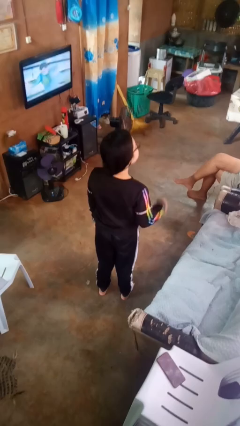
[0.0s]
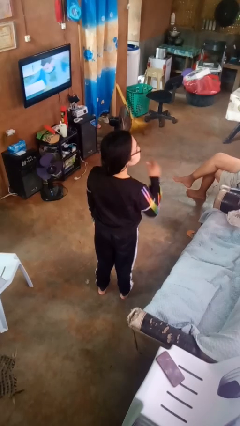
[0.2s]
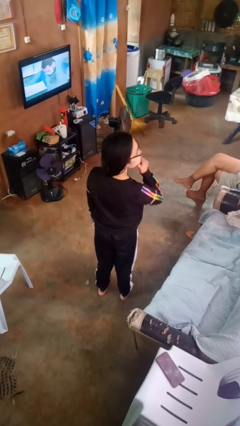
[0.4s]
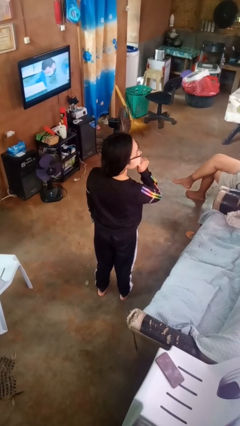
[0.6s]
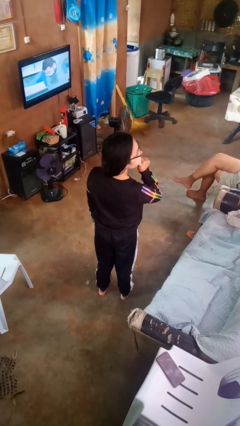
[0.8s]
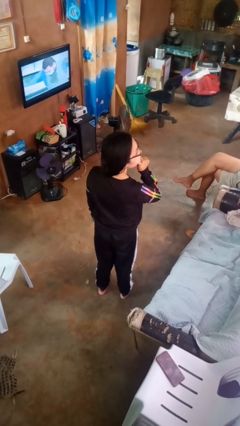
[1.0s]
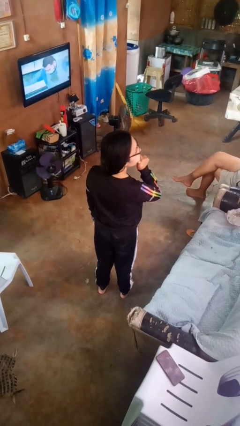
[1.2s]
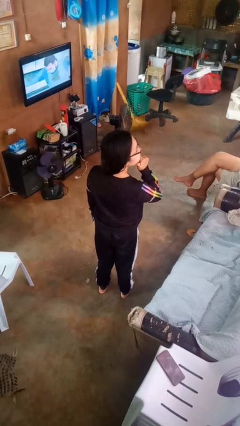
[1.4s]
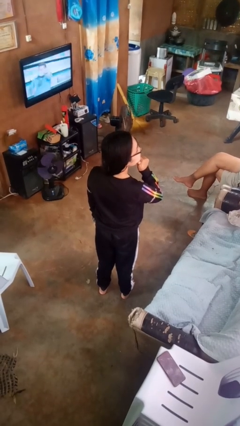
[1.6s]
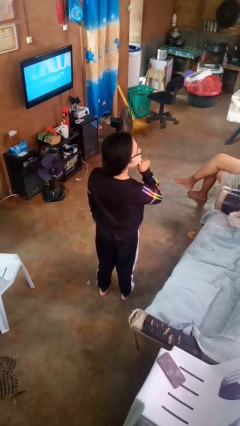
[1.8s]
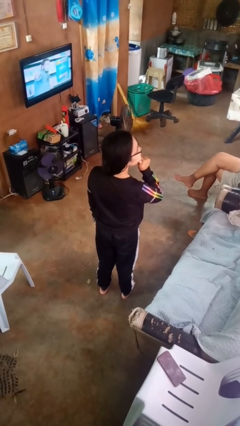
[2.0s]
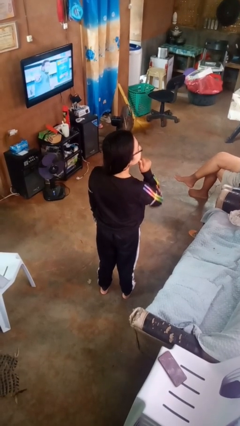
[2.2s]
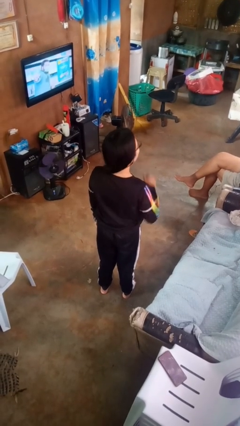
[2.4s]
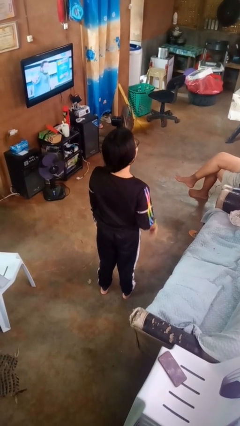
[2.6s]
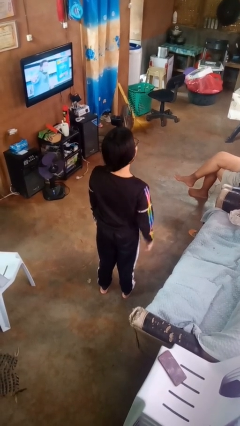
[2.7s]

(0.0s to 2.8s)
person strokes chin

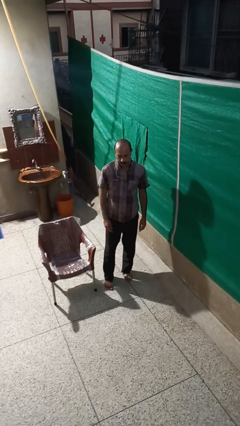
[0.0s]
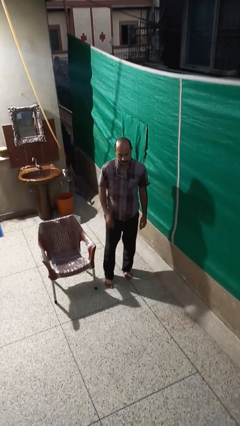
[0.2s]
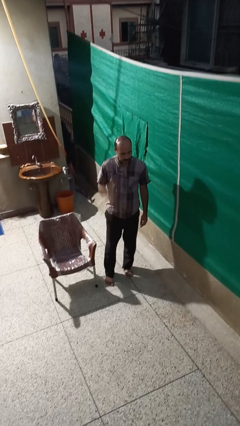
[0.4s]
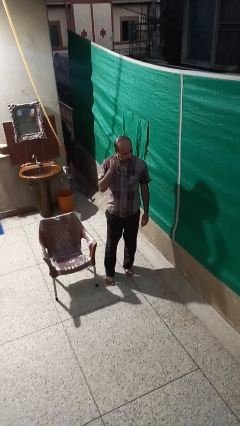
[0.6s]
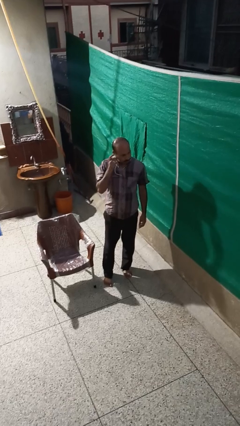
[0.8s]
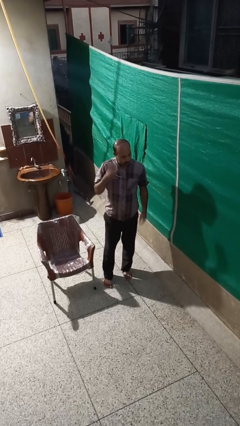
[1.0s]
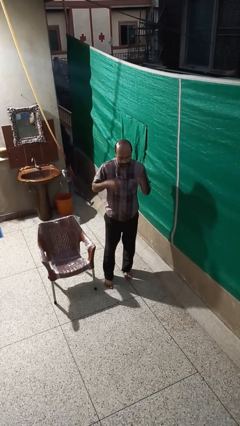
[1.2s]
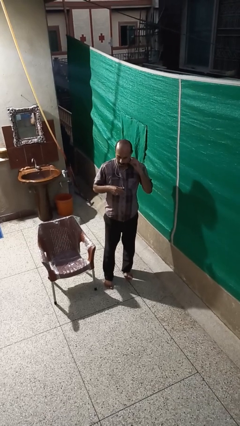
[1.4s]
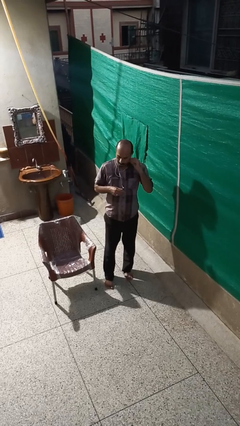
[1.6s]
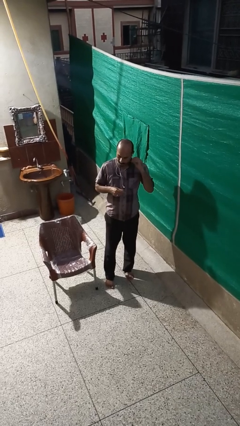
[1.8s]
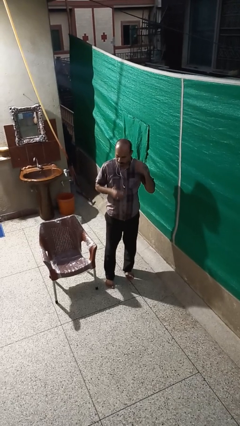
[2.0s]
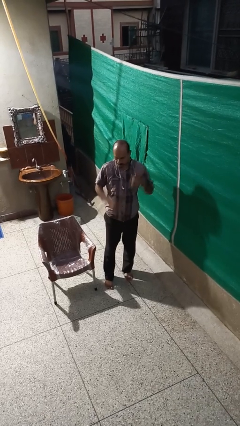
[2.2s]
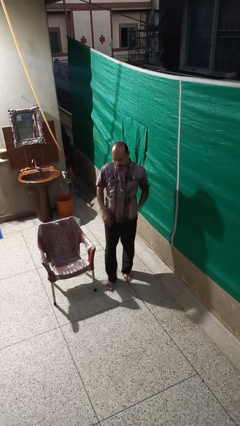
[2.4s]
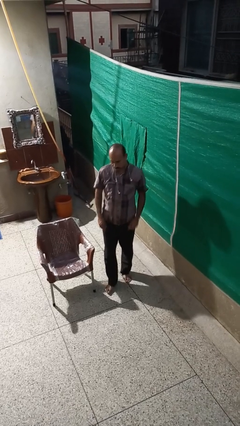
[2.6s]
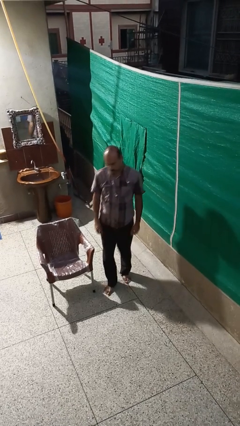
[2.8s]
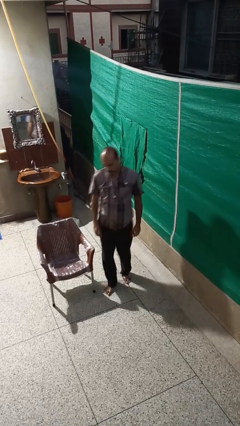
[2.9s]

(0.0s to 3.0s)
person takes off headphones

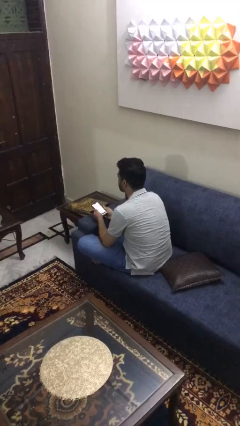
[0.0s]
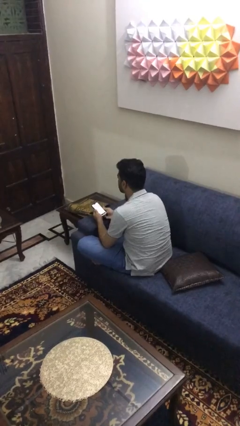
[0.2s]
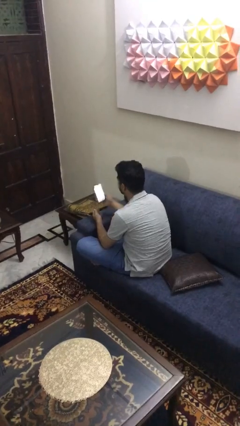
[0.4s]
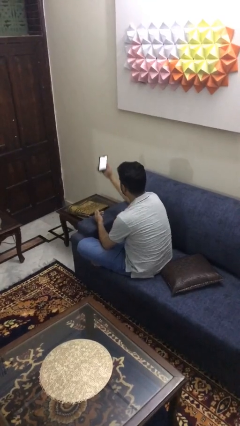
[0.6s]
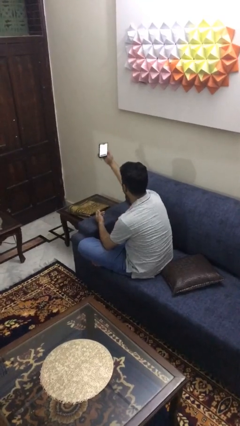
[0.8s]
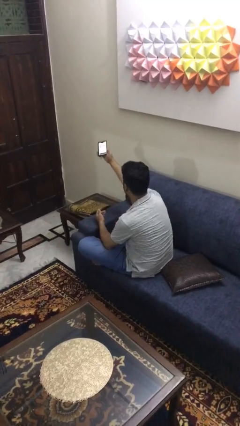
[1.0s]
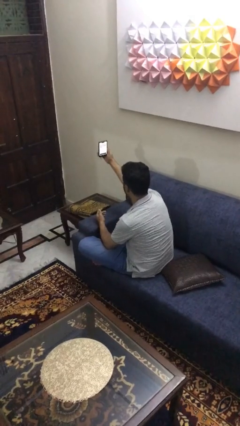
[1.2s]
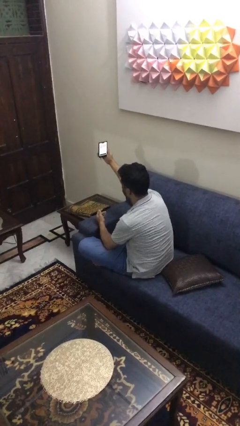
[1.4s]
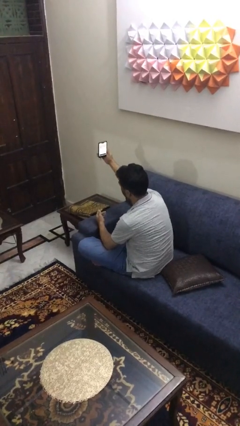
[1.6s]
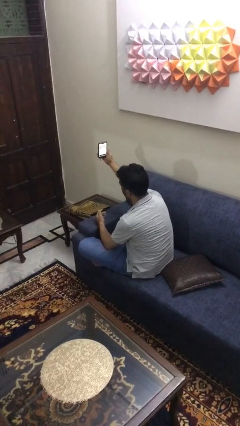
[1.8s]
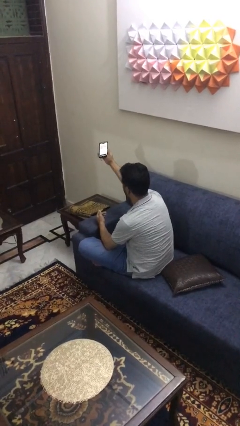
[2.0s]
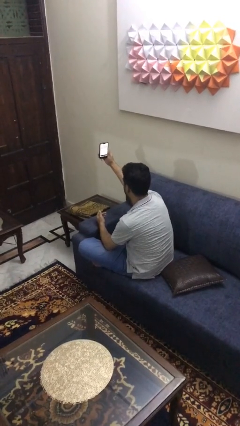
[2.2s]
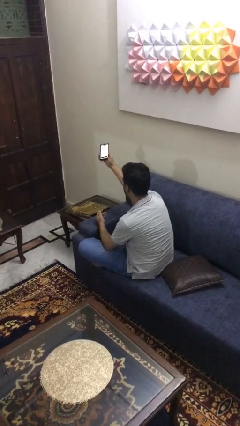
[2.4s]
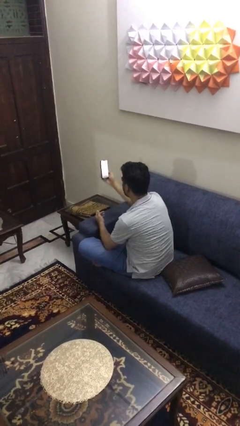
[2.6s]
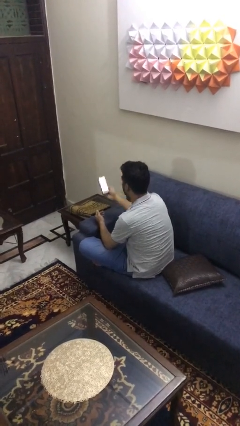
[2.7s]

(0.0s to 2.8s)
person takes selfie

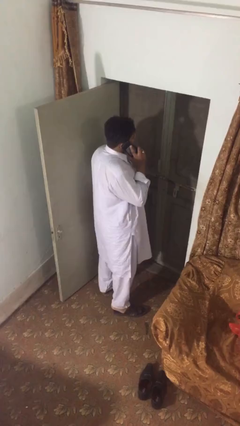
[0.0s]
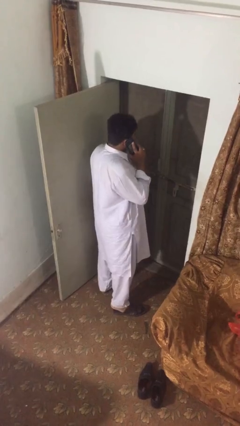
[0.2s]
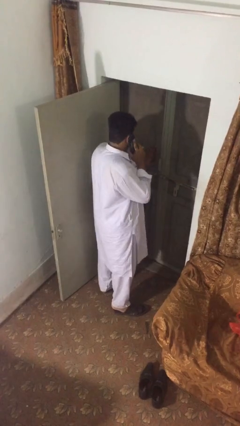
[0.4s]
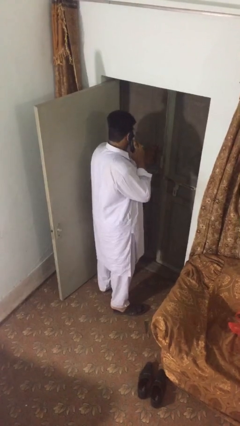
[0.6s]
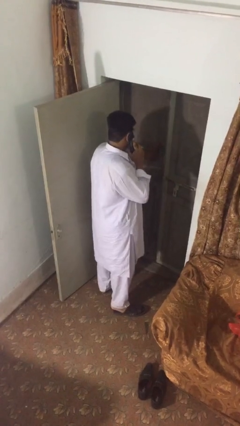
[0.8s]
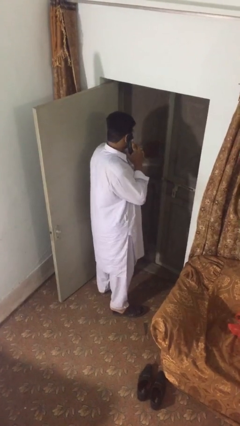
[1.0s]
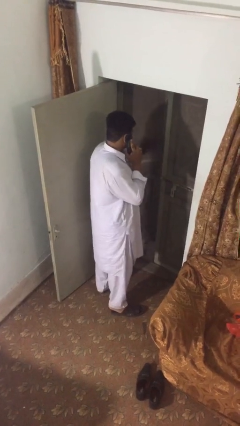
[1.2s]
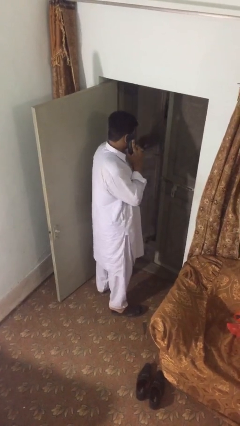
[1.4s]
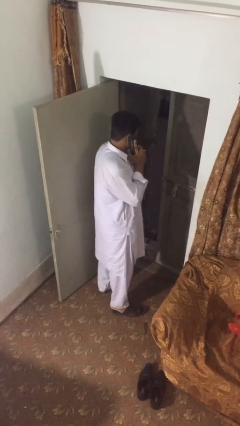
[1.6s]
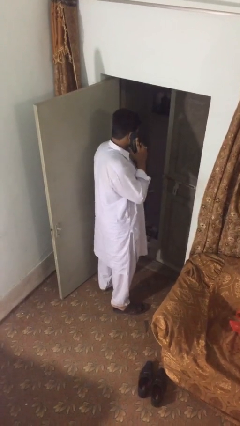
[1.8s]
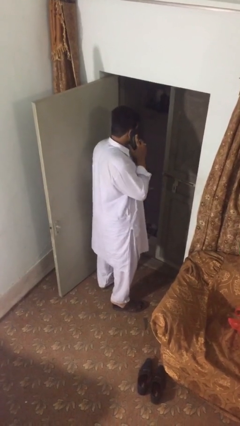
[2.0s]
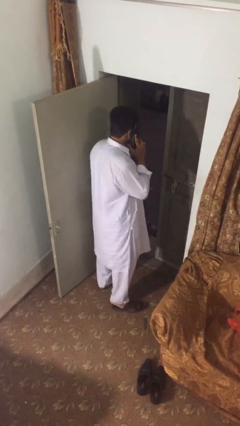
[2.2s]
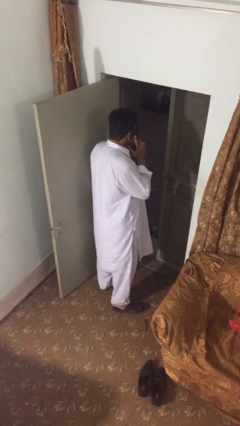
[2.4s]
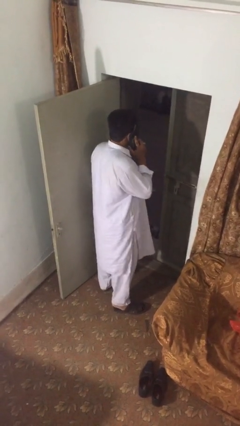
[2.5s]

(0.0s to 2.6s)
person opens facility door

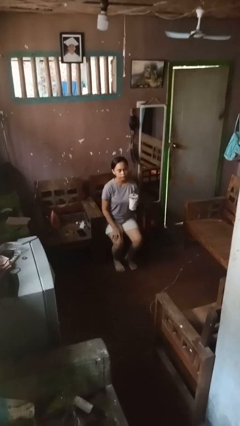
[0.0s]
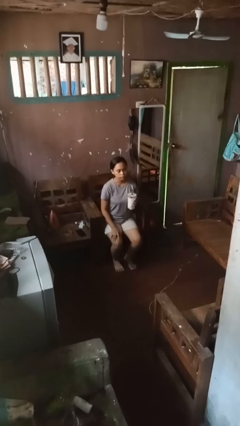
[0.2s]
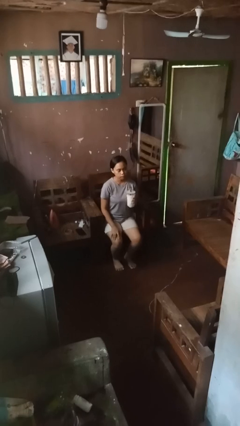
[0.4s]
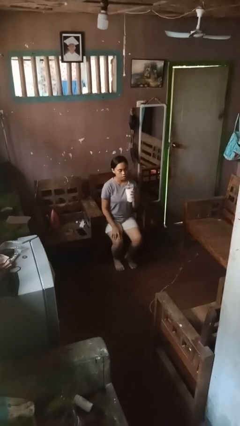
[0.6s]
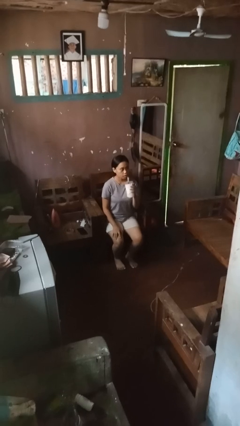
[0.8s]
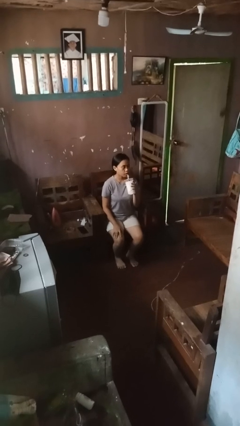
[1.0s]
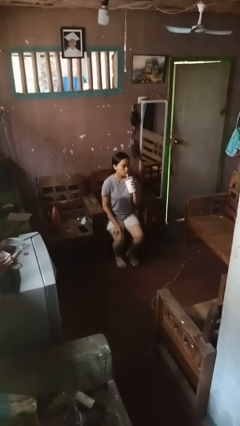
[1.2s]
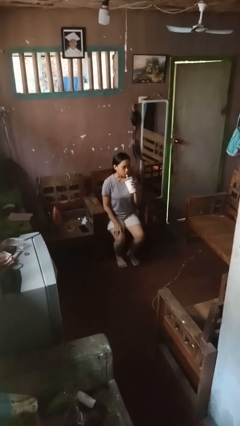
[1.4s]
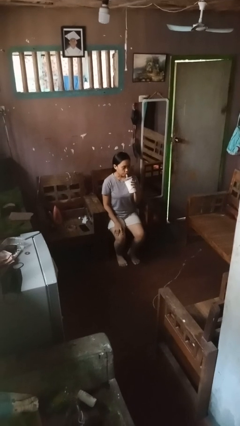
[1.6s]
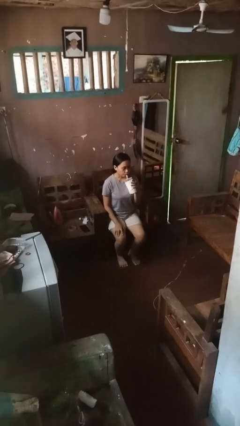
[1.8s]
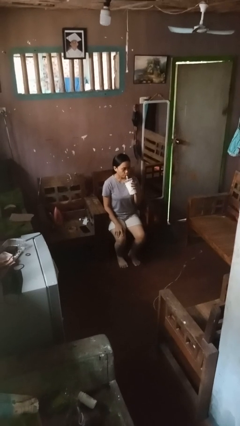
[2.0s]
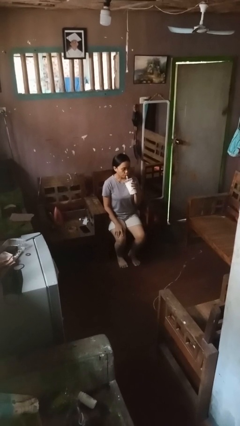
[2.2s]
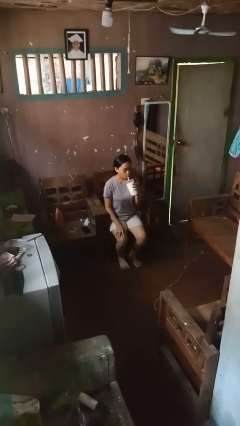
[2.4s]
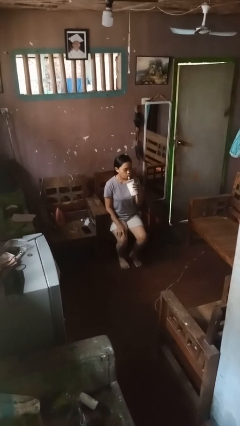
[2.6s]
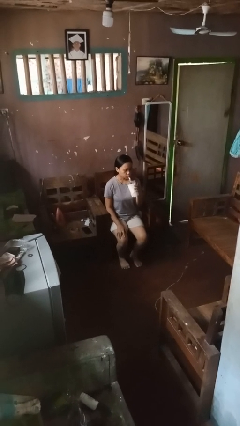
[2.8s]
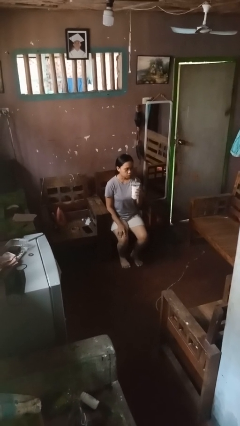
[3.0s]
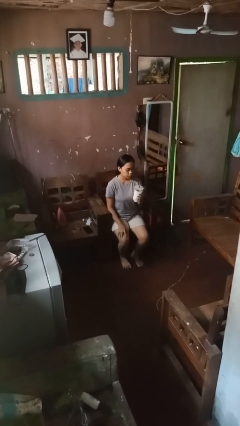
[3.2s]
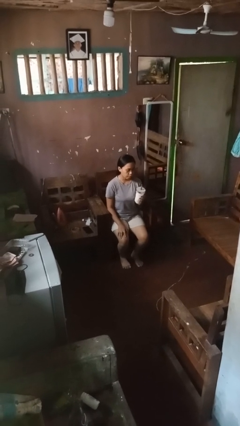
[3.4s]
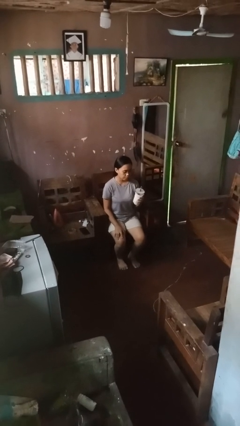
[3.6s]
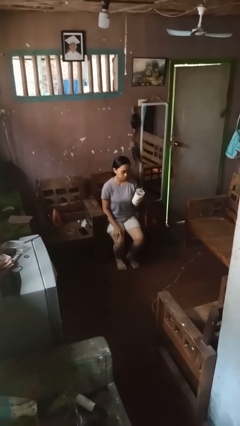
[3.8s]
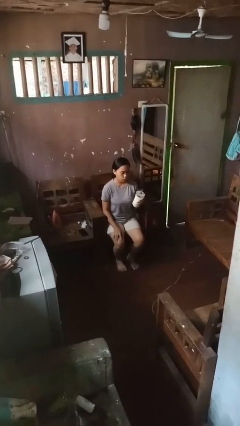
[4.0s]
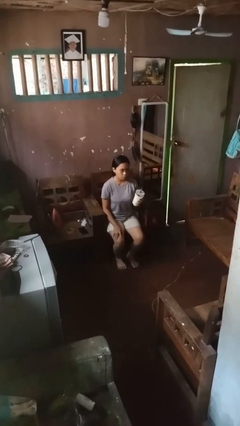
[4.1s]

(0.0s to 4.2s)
person drinks from straw

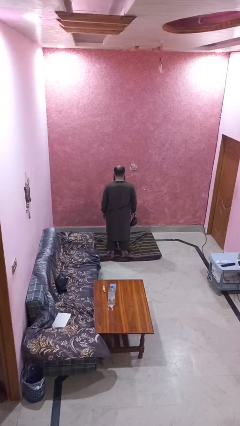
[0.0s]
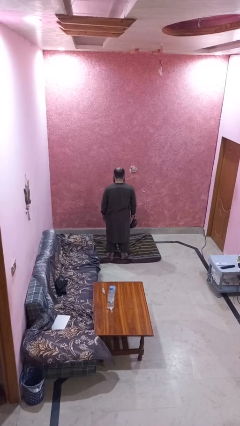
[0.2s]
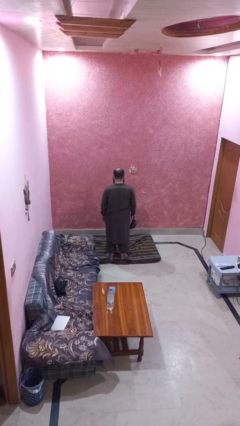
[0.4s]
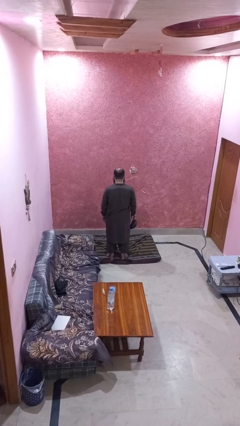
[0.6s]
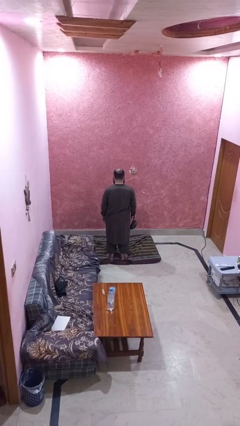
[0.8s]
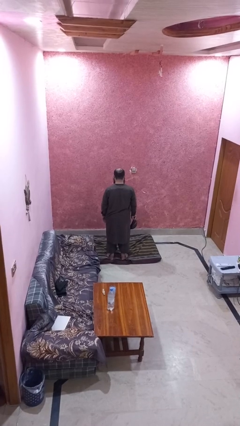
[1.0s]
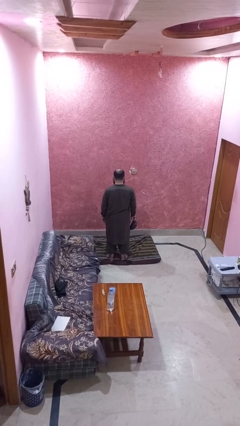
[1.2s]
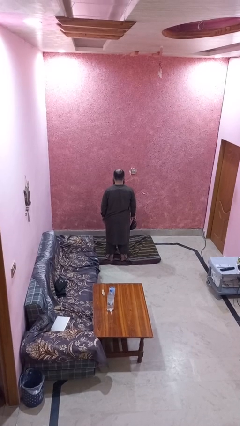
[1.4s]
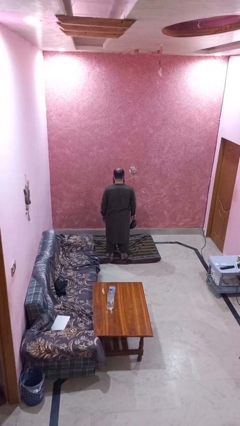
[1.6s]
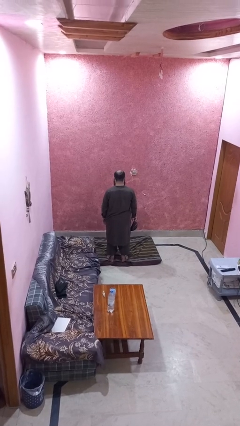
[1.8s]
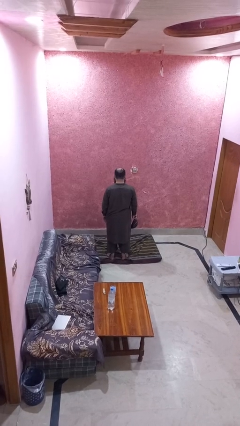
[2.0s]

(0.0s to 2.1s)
person puts on hat
